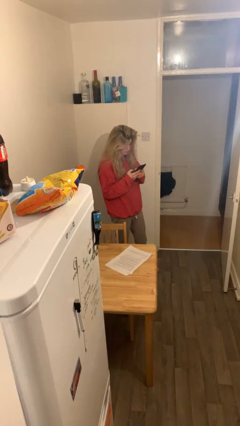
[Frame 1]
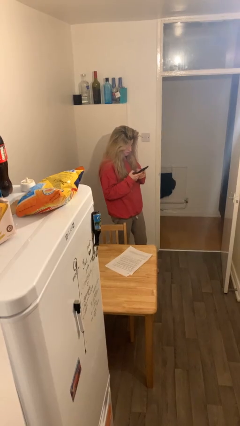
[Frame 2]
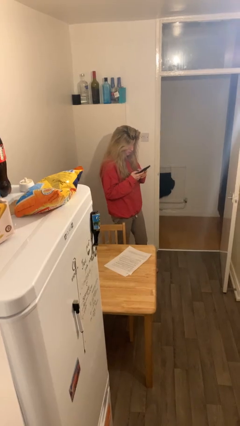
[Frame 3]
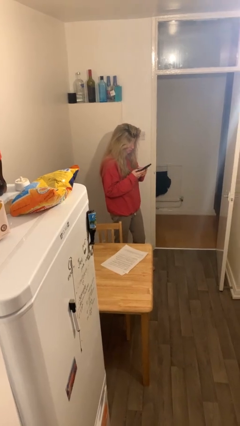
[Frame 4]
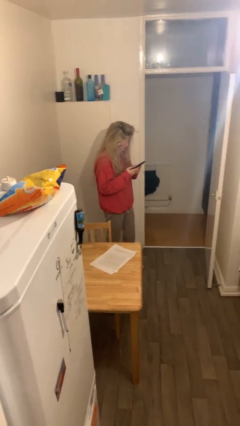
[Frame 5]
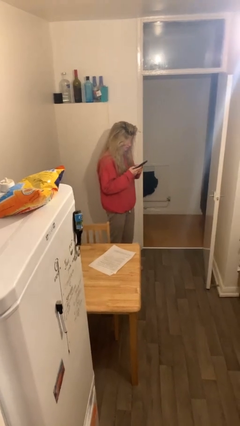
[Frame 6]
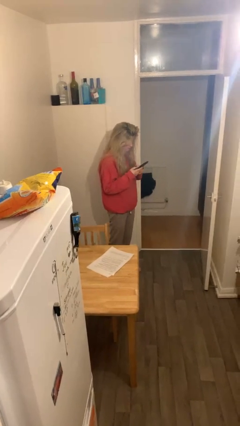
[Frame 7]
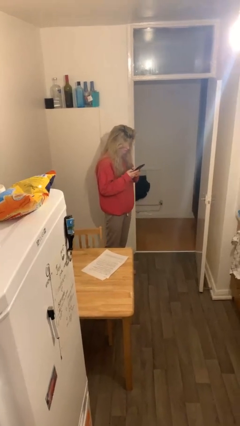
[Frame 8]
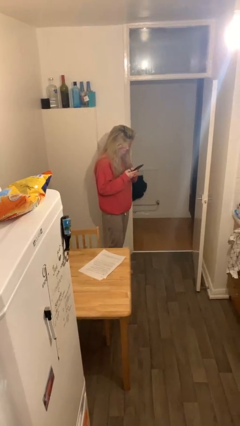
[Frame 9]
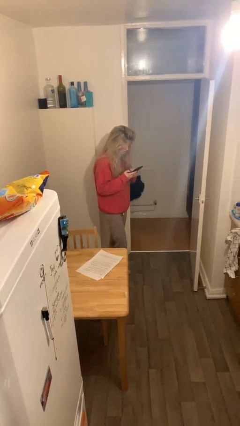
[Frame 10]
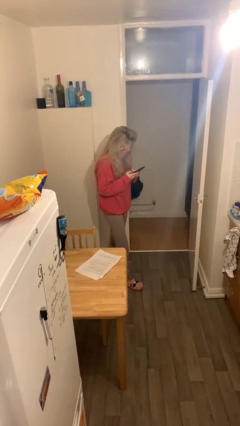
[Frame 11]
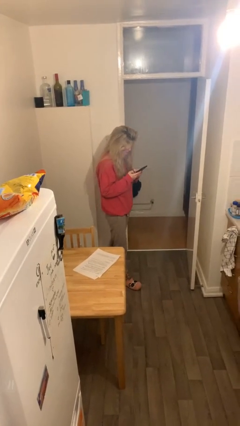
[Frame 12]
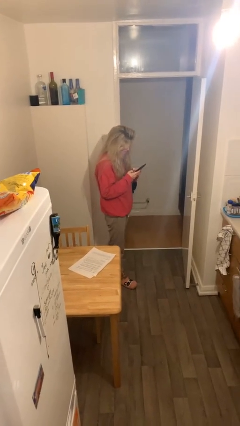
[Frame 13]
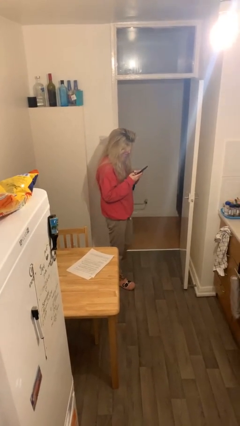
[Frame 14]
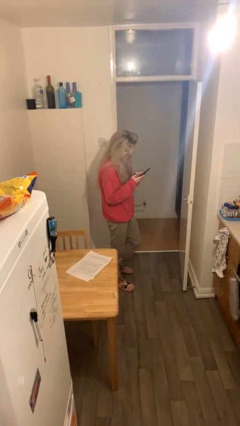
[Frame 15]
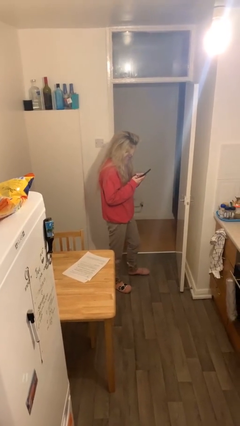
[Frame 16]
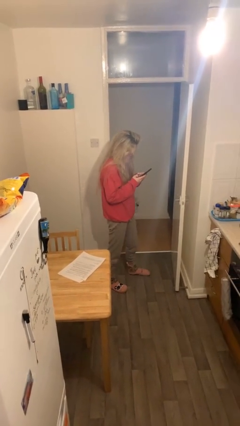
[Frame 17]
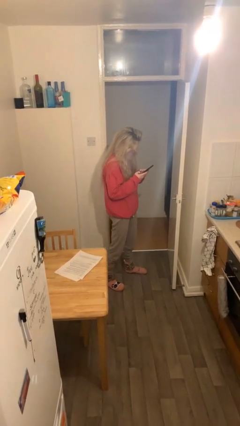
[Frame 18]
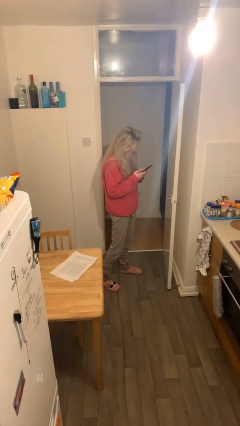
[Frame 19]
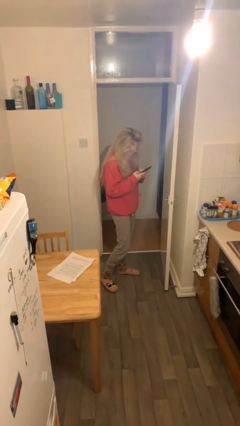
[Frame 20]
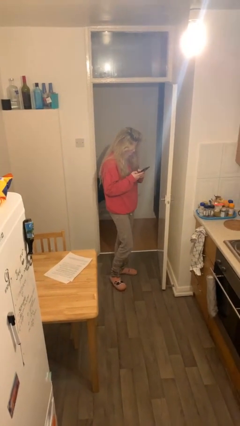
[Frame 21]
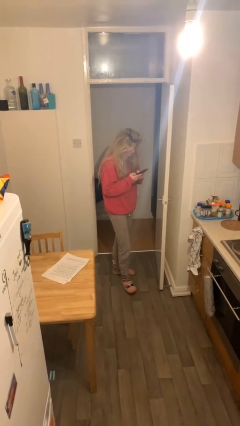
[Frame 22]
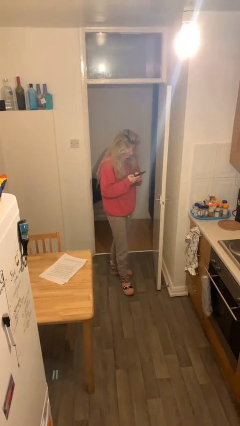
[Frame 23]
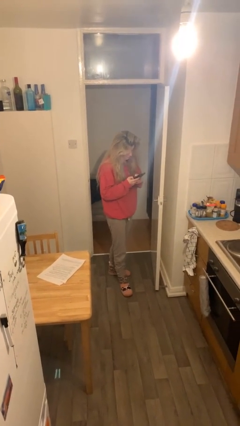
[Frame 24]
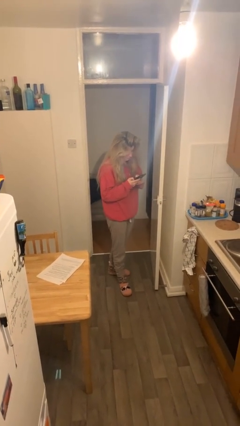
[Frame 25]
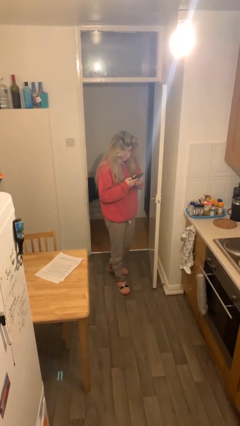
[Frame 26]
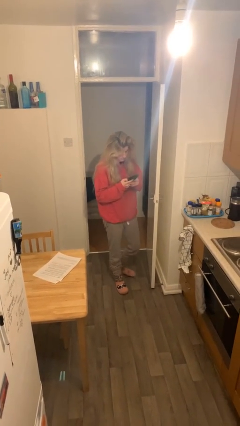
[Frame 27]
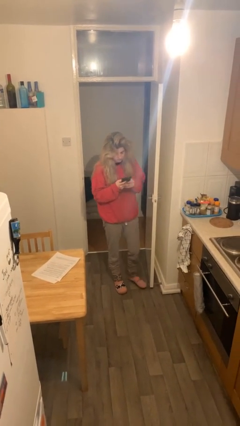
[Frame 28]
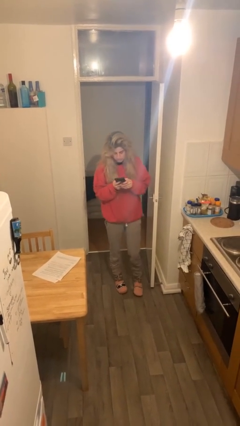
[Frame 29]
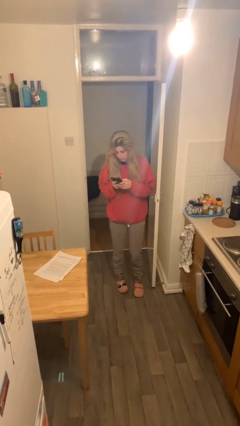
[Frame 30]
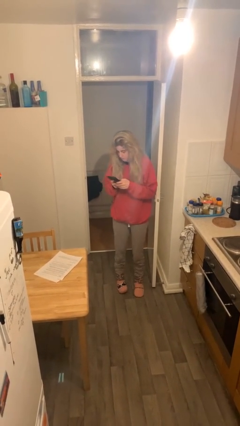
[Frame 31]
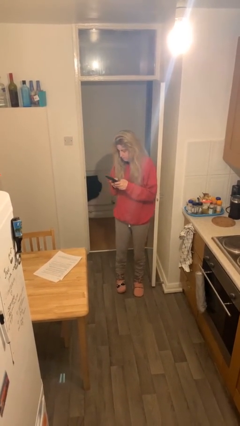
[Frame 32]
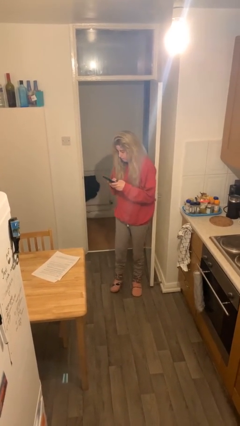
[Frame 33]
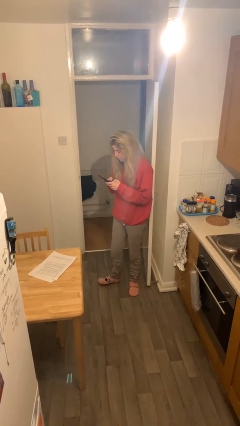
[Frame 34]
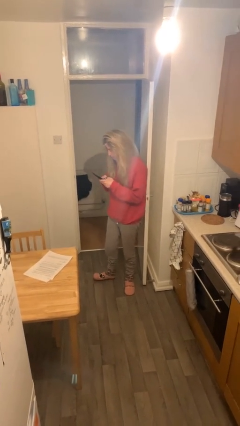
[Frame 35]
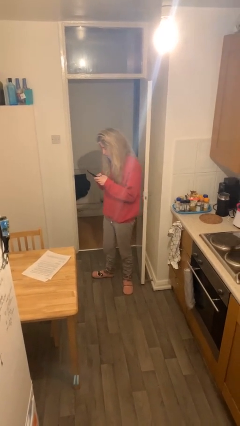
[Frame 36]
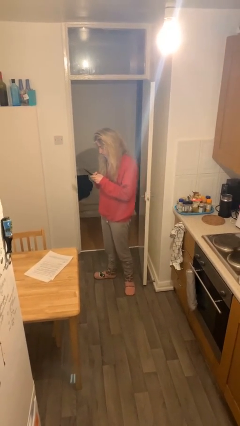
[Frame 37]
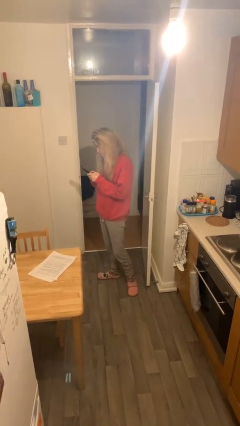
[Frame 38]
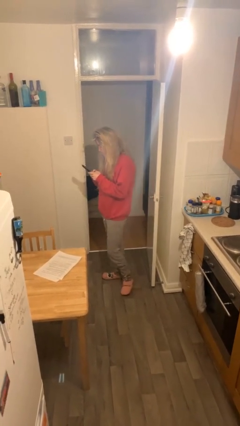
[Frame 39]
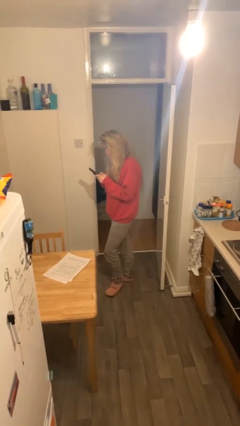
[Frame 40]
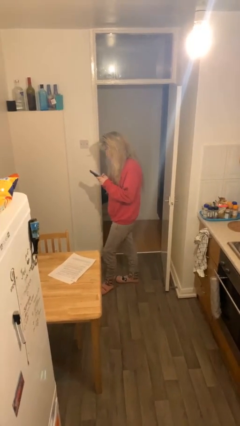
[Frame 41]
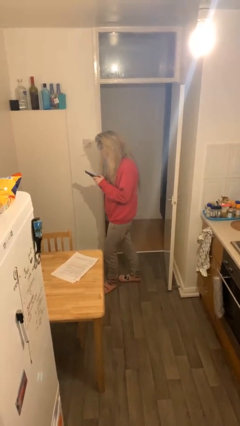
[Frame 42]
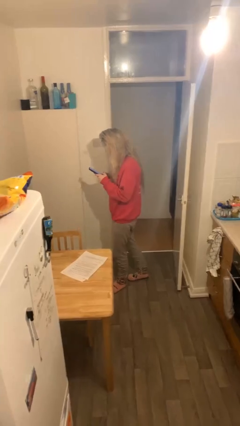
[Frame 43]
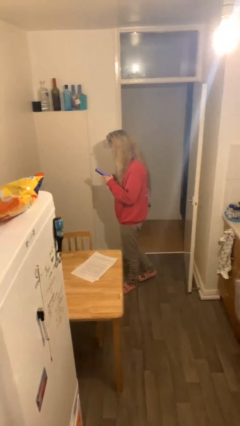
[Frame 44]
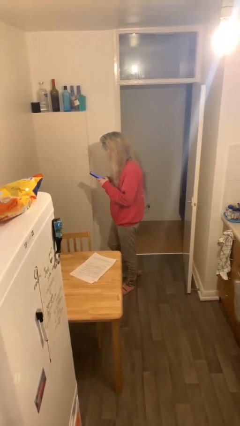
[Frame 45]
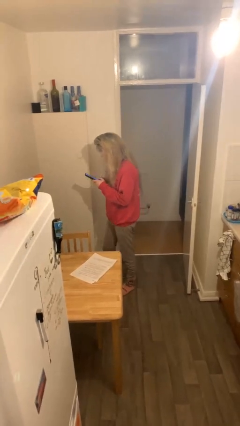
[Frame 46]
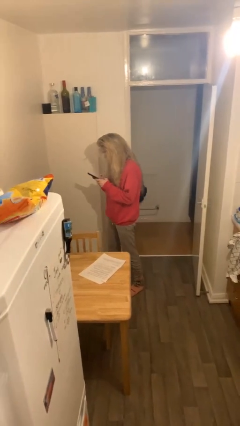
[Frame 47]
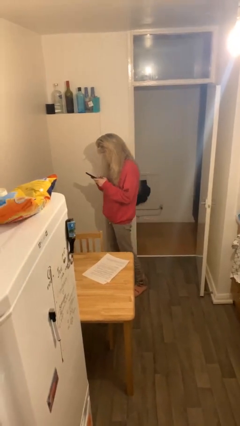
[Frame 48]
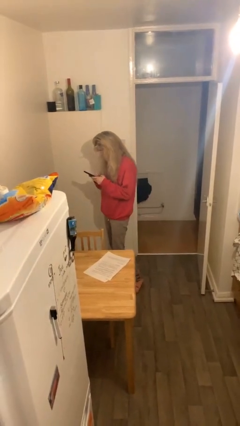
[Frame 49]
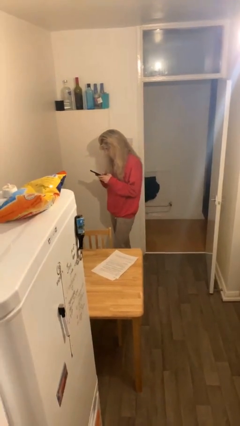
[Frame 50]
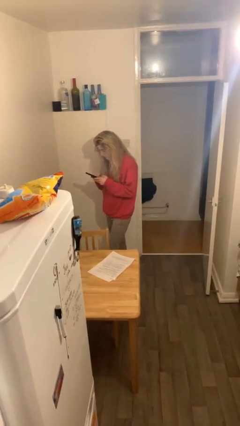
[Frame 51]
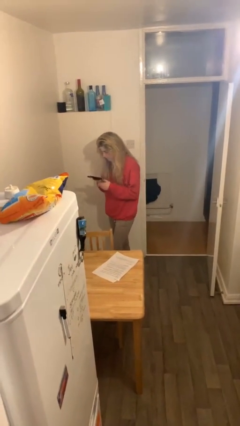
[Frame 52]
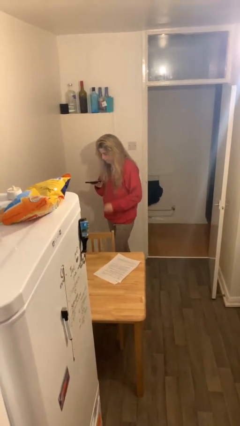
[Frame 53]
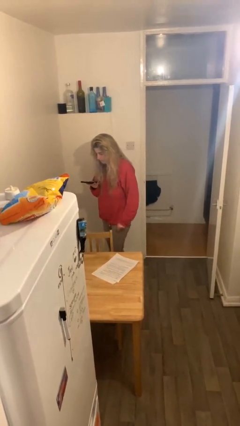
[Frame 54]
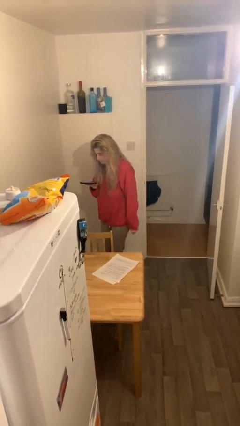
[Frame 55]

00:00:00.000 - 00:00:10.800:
person texts on phone

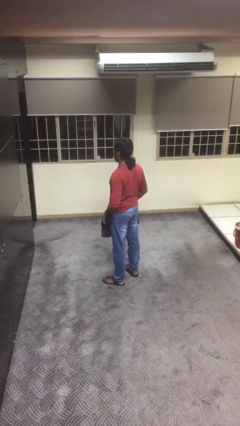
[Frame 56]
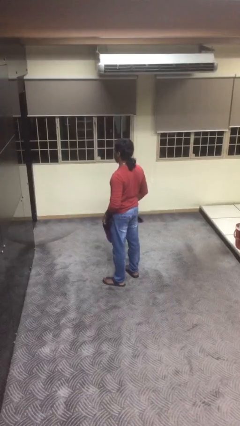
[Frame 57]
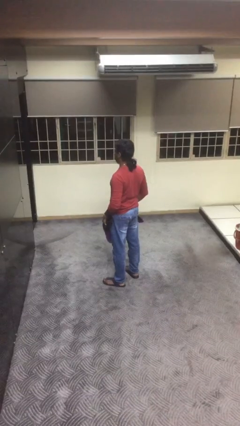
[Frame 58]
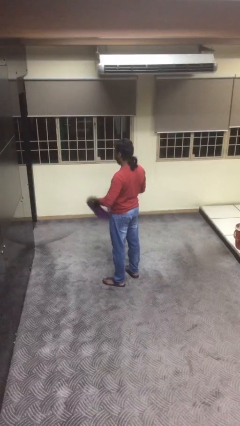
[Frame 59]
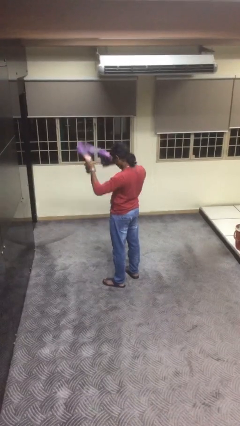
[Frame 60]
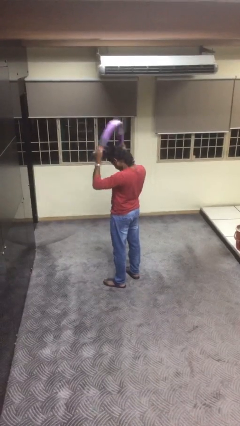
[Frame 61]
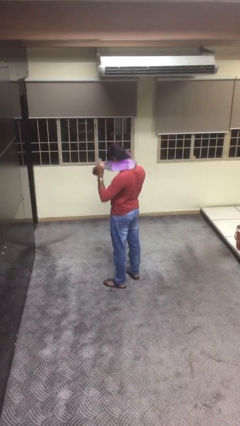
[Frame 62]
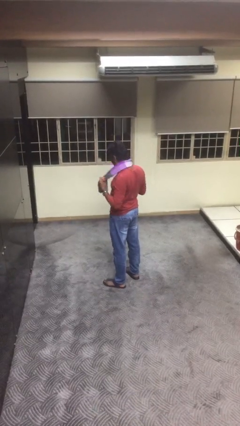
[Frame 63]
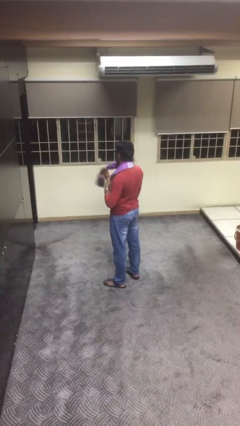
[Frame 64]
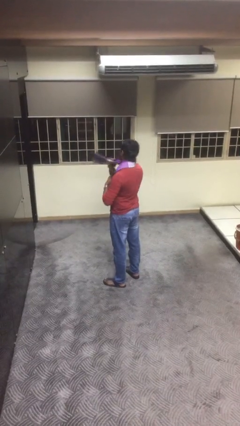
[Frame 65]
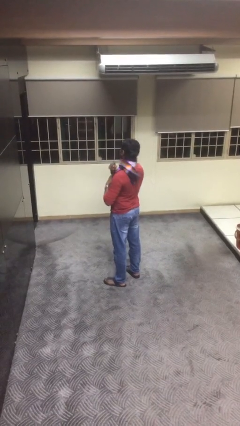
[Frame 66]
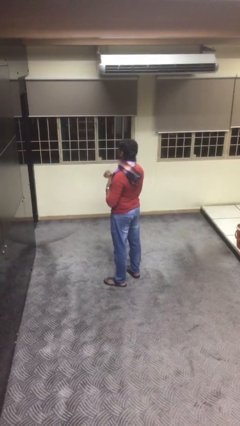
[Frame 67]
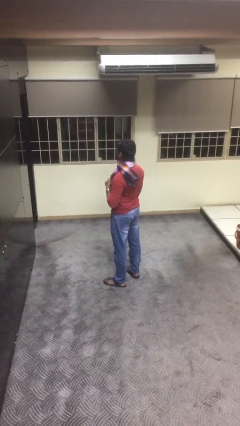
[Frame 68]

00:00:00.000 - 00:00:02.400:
person puts on scarf

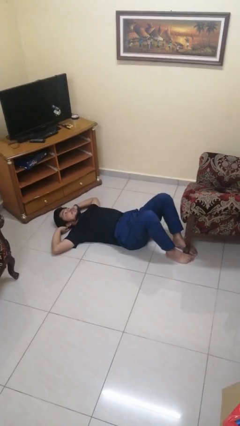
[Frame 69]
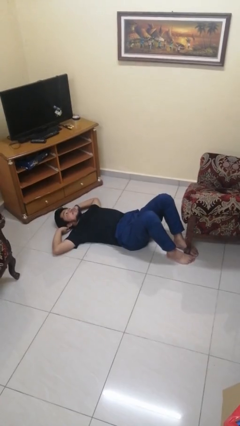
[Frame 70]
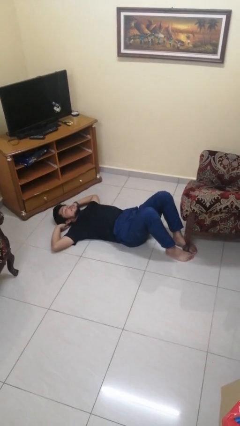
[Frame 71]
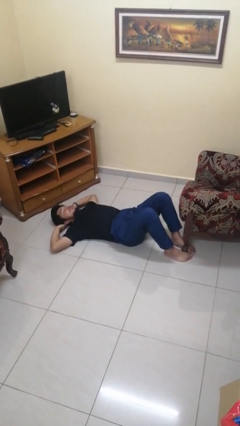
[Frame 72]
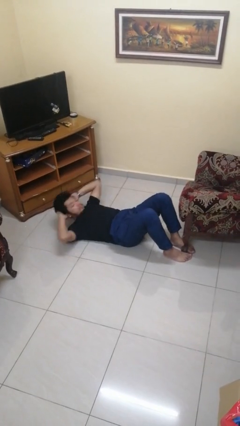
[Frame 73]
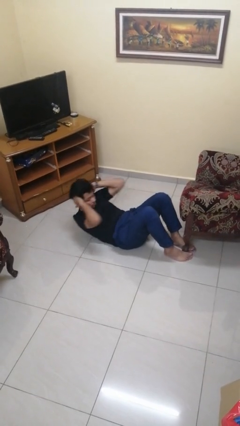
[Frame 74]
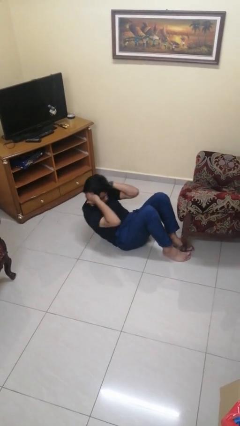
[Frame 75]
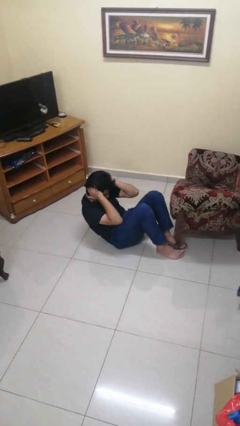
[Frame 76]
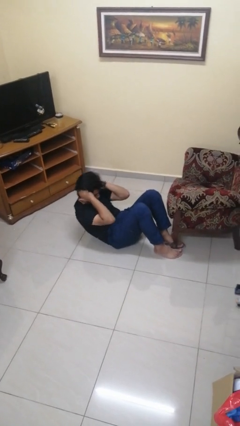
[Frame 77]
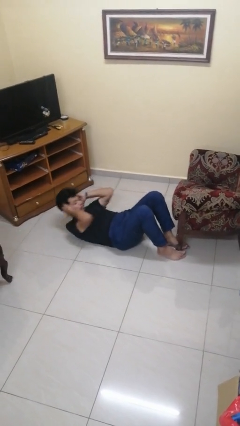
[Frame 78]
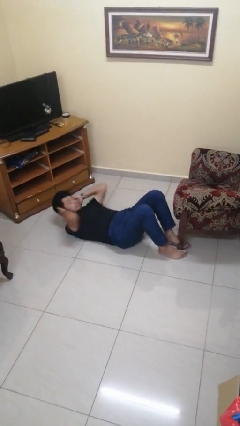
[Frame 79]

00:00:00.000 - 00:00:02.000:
person exercises with situp

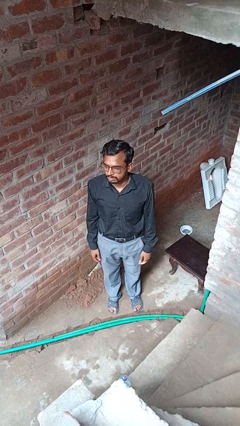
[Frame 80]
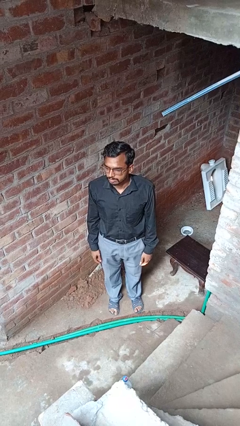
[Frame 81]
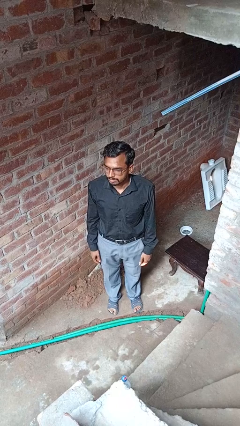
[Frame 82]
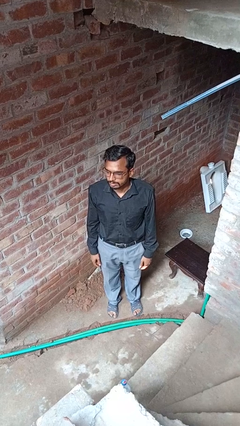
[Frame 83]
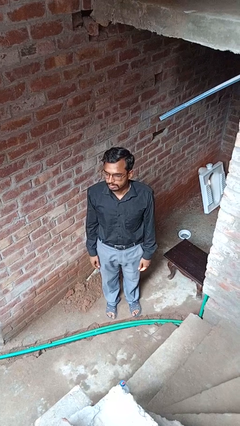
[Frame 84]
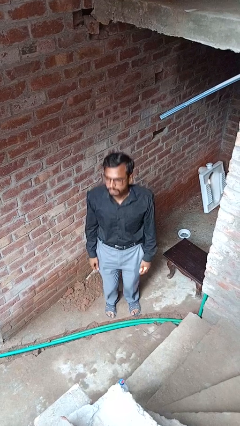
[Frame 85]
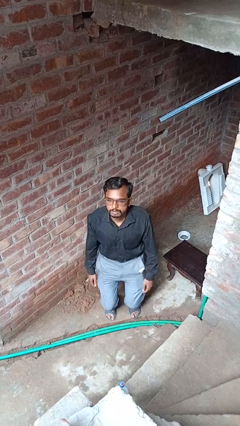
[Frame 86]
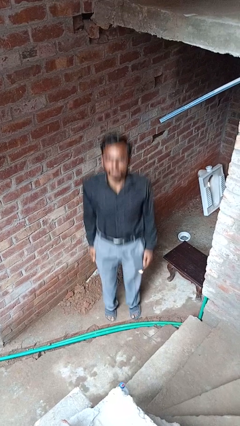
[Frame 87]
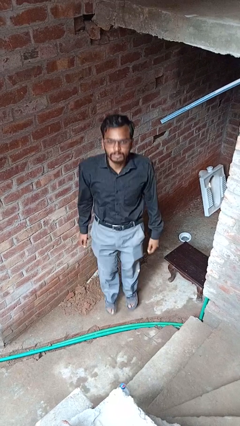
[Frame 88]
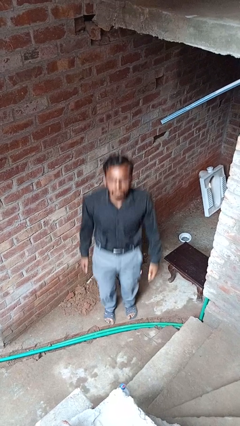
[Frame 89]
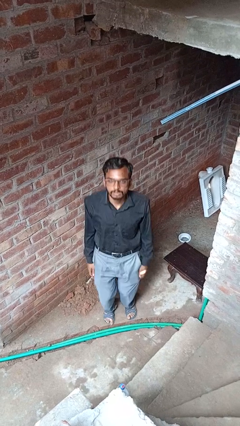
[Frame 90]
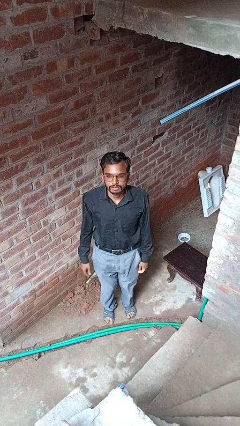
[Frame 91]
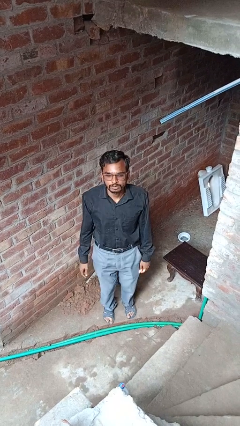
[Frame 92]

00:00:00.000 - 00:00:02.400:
person jumps
